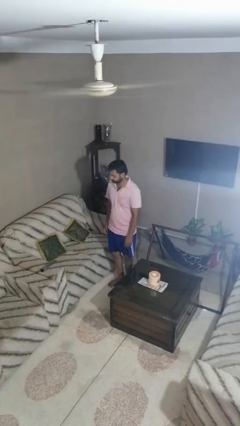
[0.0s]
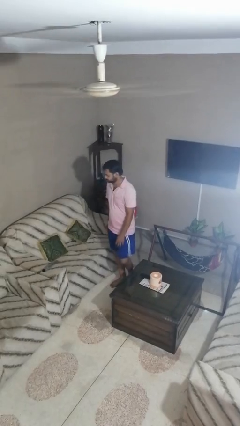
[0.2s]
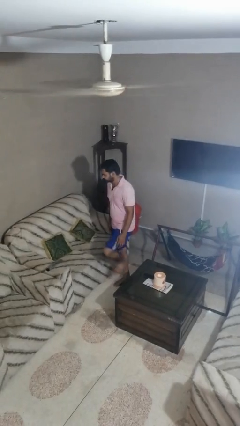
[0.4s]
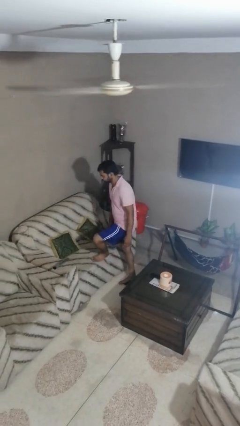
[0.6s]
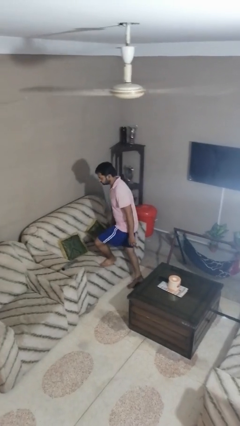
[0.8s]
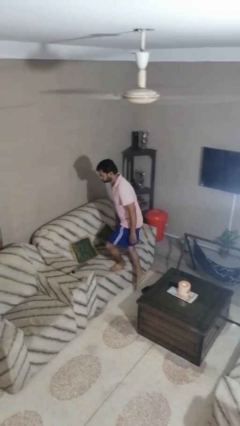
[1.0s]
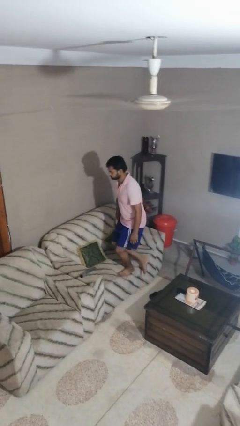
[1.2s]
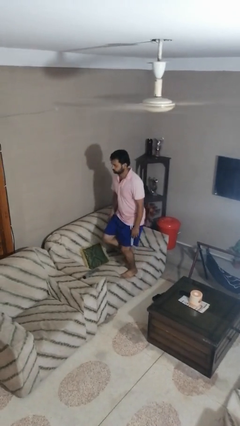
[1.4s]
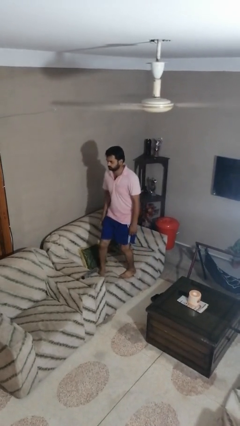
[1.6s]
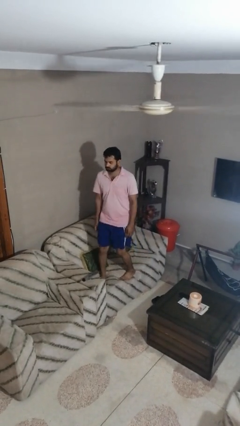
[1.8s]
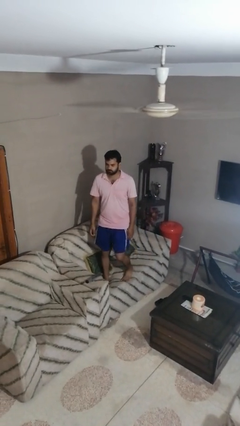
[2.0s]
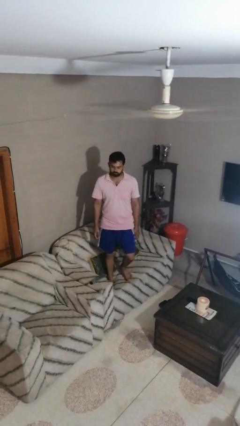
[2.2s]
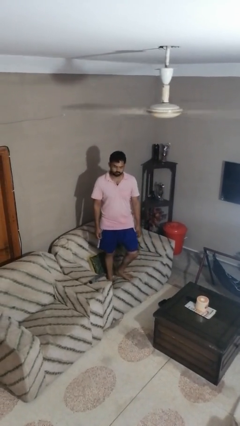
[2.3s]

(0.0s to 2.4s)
person climbs on couch

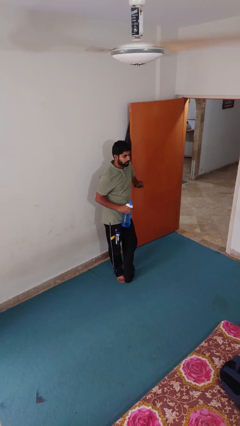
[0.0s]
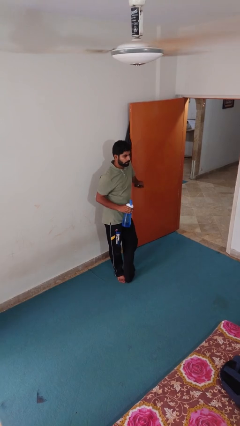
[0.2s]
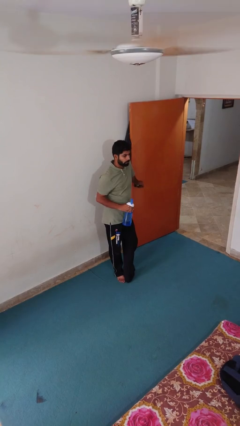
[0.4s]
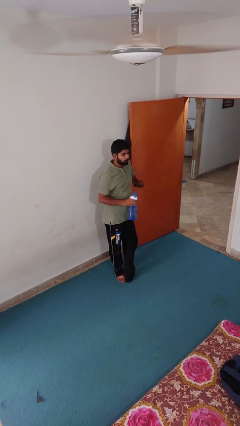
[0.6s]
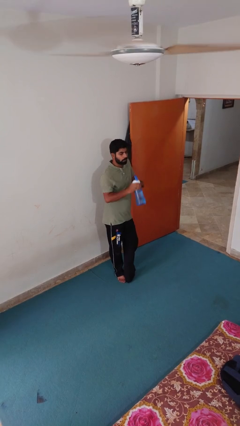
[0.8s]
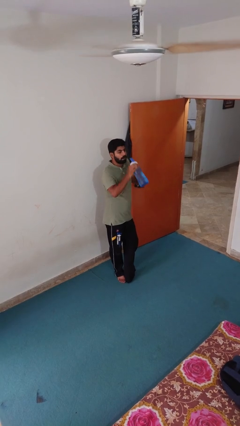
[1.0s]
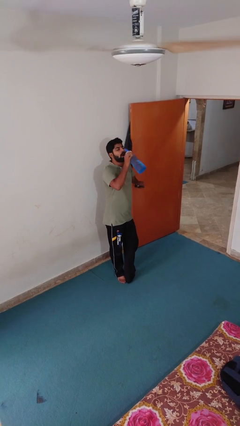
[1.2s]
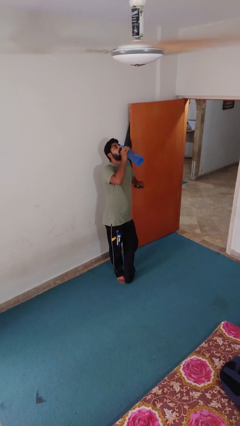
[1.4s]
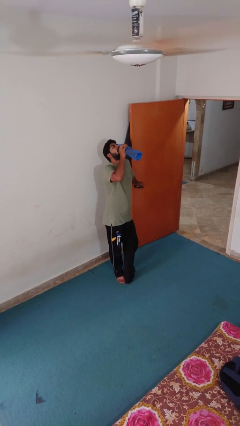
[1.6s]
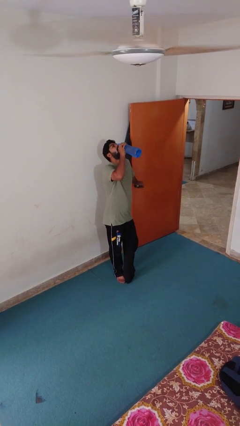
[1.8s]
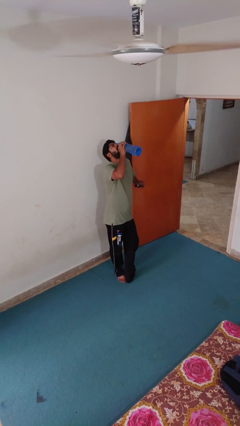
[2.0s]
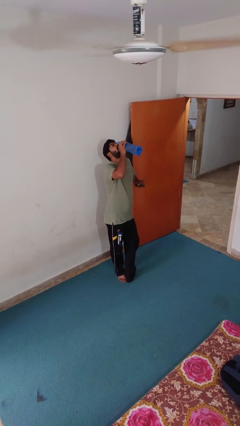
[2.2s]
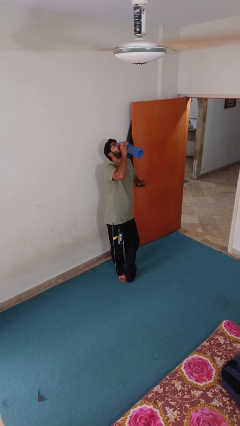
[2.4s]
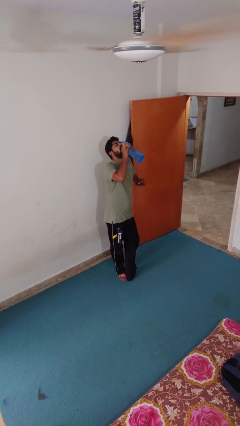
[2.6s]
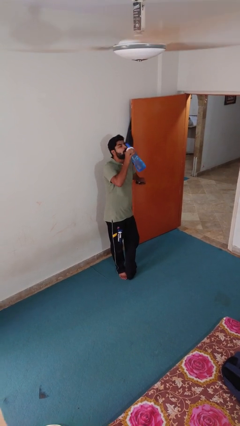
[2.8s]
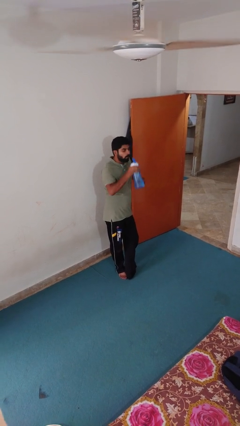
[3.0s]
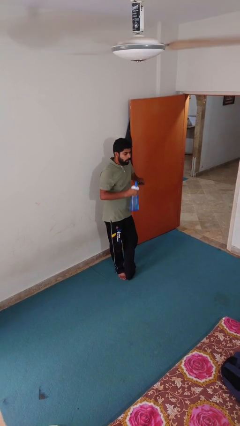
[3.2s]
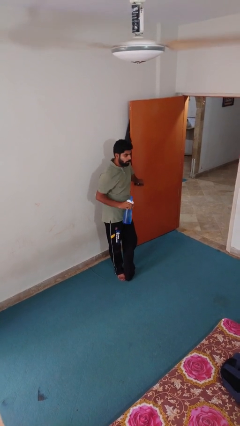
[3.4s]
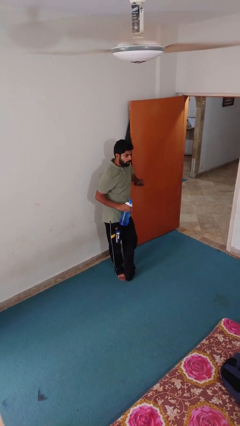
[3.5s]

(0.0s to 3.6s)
person drinks from bottle

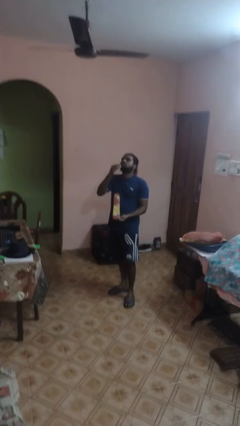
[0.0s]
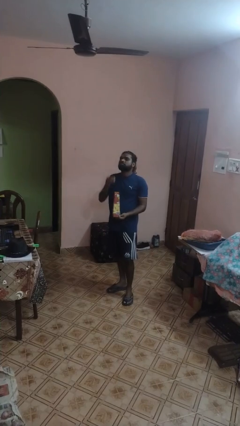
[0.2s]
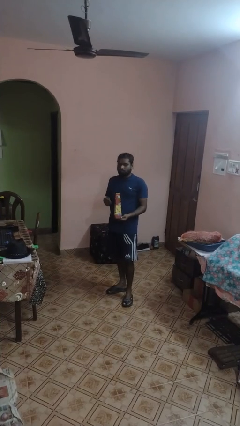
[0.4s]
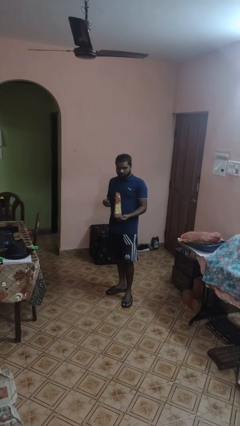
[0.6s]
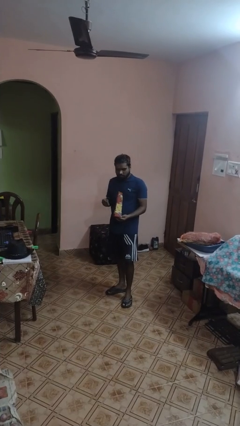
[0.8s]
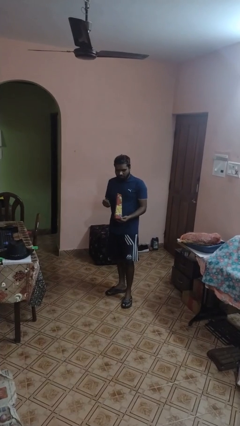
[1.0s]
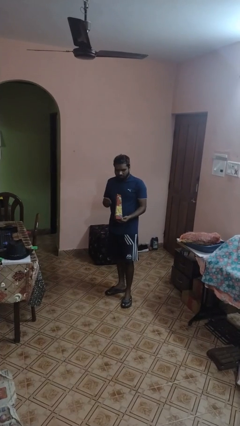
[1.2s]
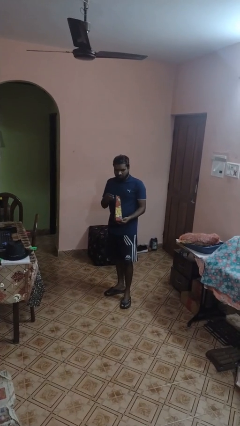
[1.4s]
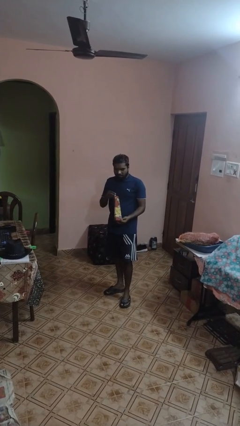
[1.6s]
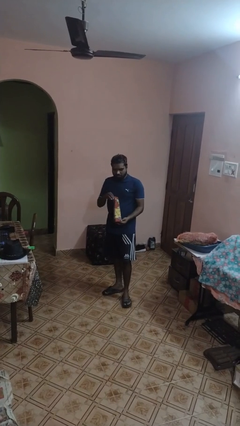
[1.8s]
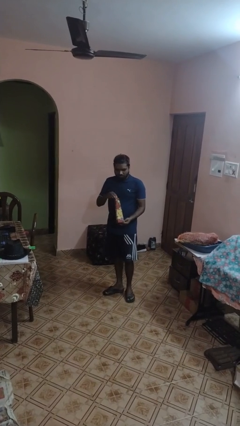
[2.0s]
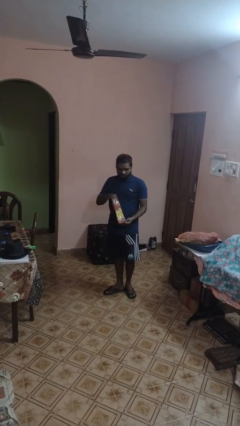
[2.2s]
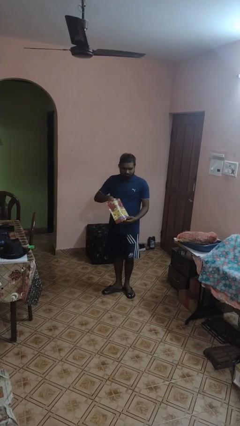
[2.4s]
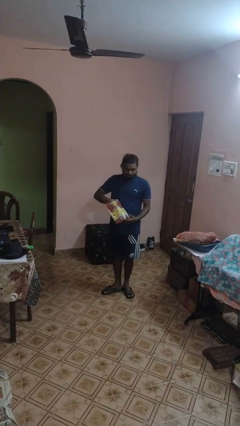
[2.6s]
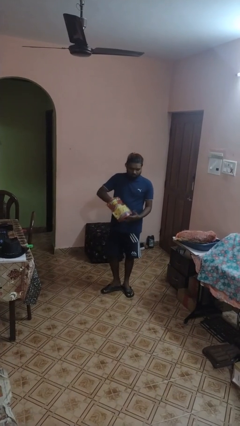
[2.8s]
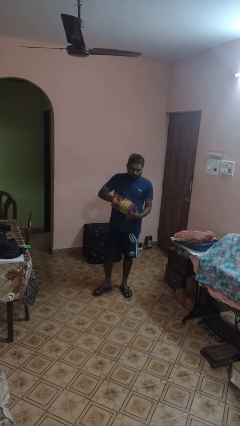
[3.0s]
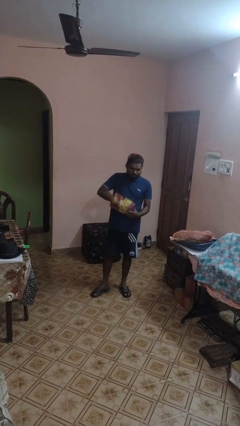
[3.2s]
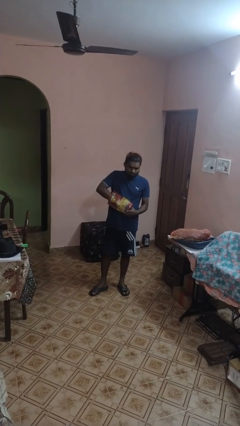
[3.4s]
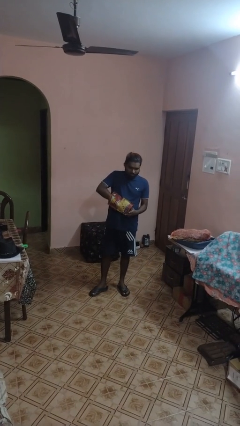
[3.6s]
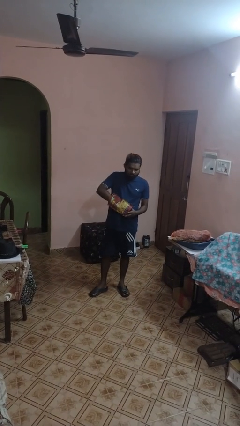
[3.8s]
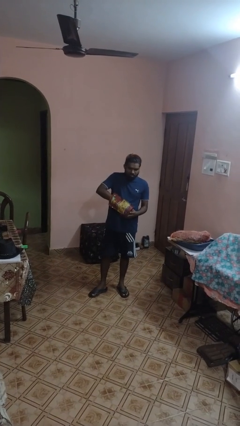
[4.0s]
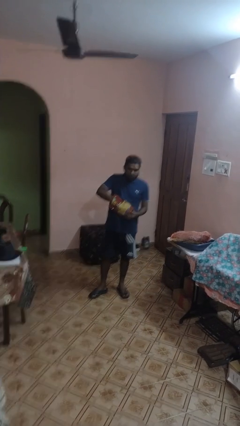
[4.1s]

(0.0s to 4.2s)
person eats snack from bag

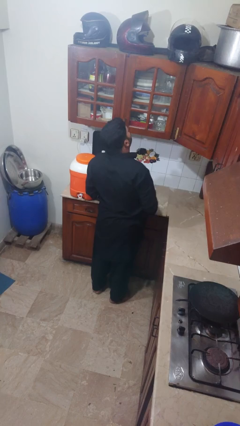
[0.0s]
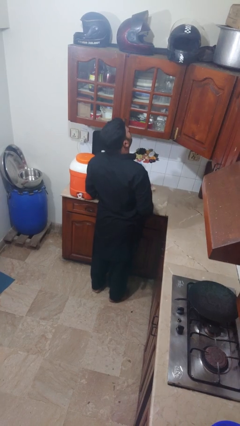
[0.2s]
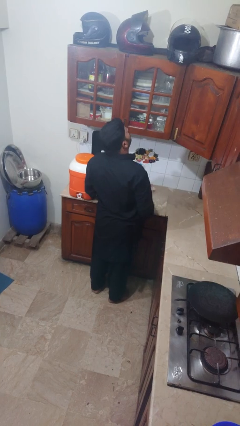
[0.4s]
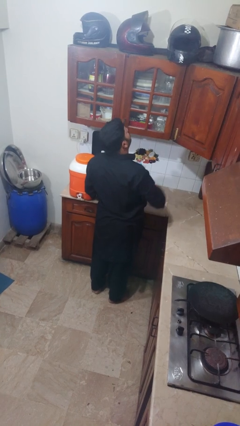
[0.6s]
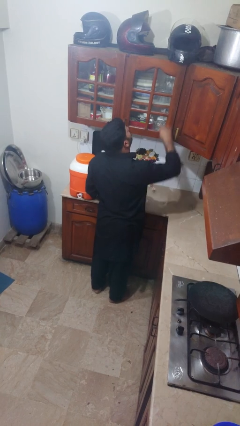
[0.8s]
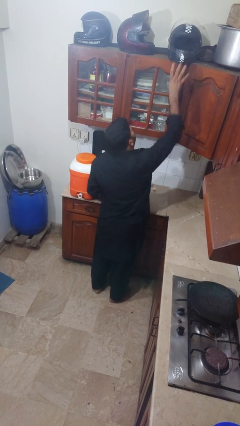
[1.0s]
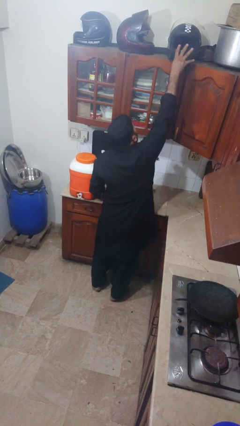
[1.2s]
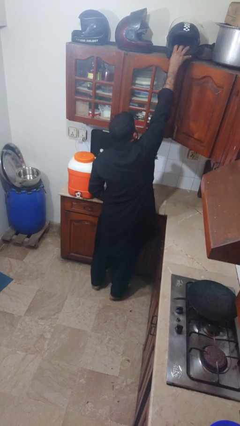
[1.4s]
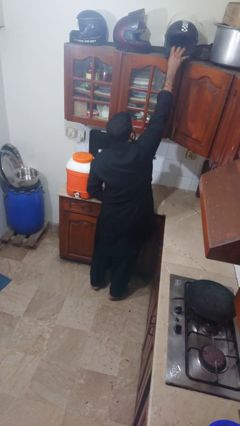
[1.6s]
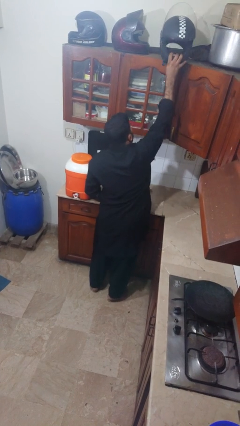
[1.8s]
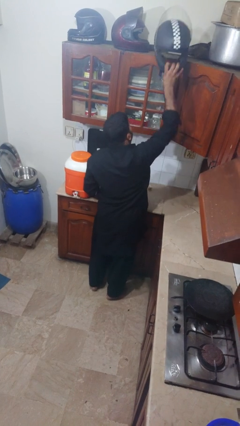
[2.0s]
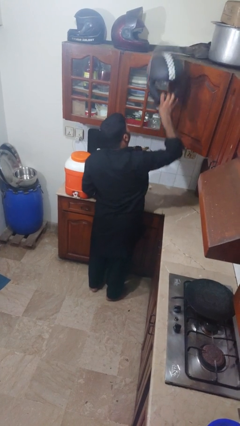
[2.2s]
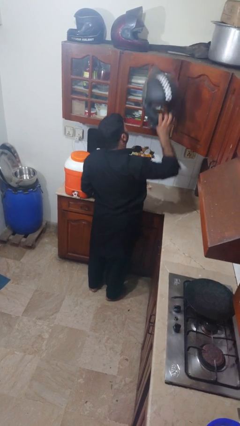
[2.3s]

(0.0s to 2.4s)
person picks up object from shelf

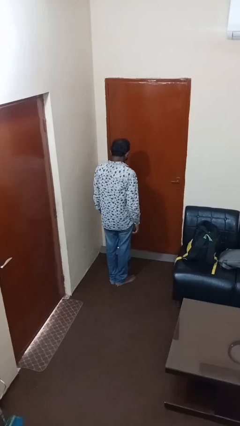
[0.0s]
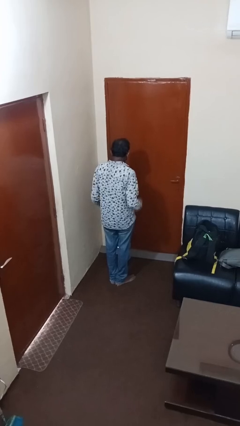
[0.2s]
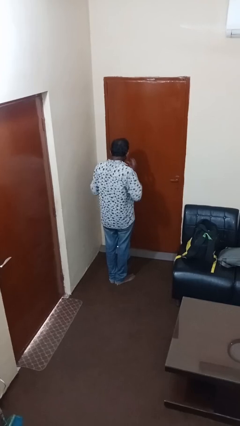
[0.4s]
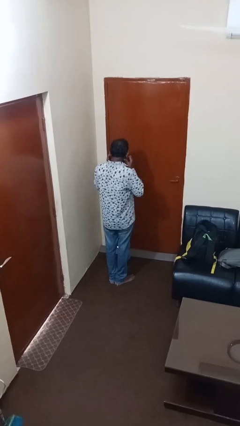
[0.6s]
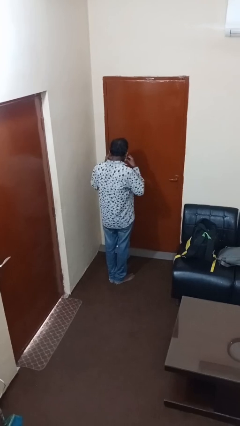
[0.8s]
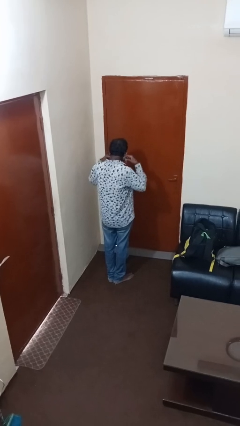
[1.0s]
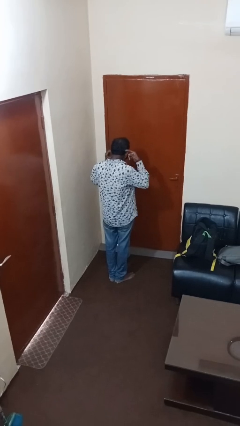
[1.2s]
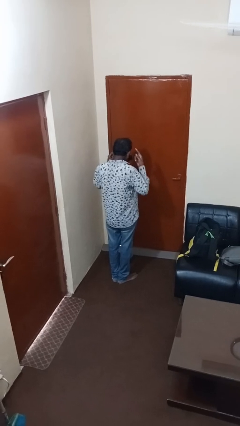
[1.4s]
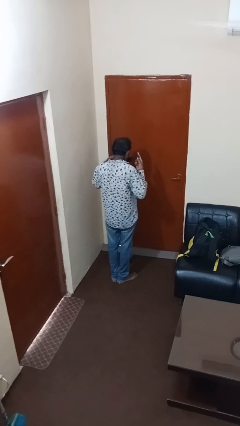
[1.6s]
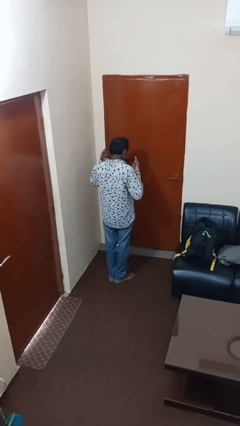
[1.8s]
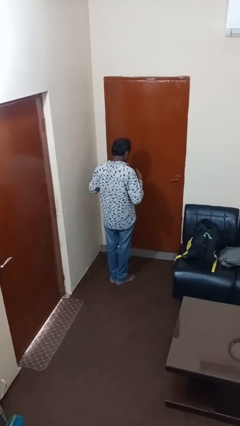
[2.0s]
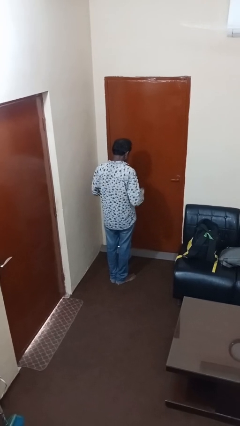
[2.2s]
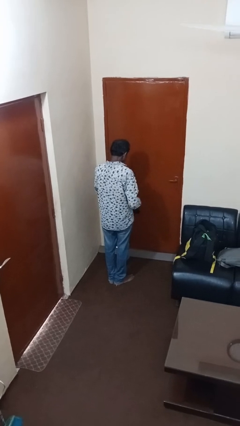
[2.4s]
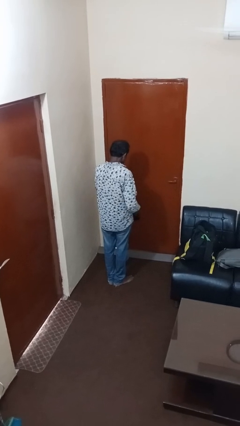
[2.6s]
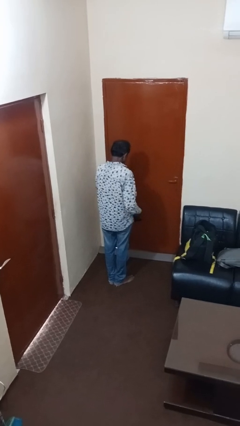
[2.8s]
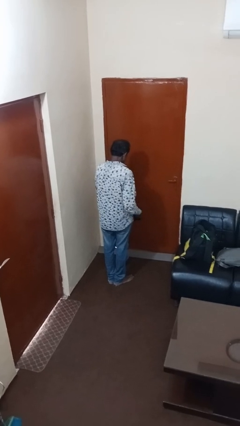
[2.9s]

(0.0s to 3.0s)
person takes off facemask

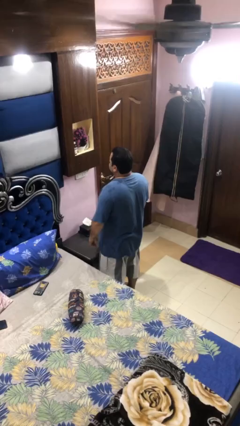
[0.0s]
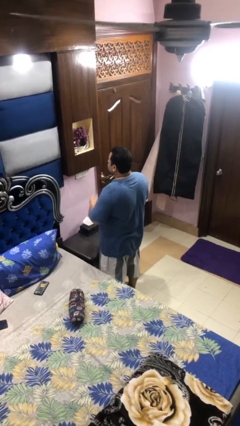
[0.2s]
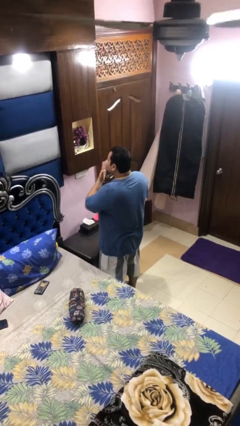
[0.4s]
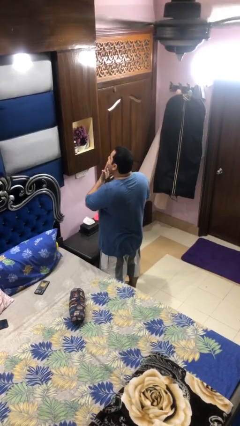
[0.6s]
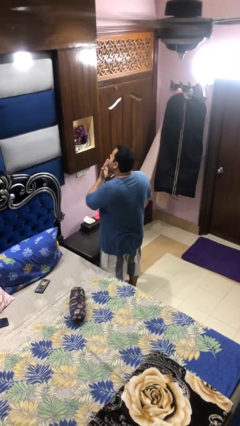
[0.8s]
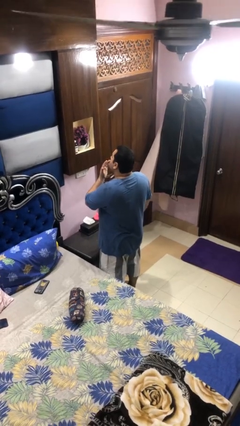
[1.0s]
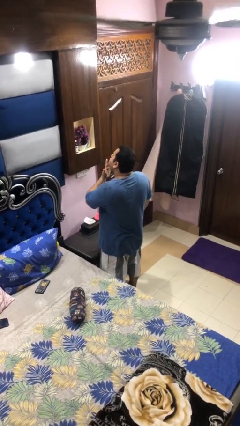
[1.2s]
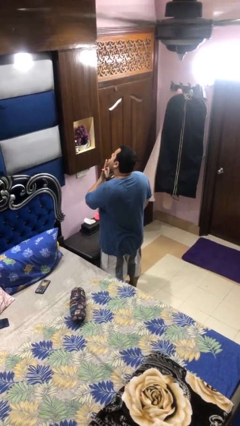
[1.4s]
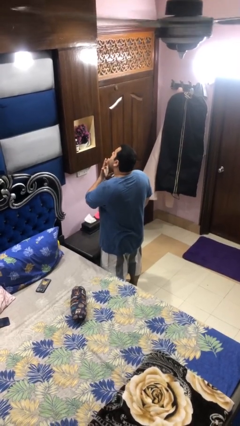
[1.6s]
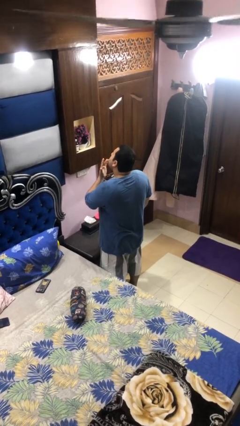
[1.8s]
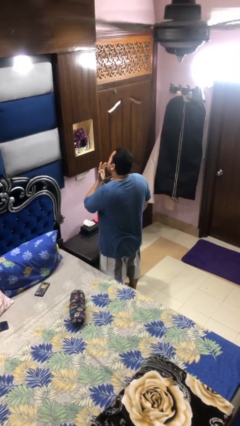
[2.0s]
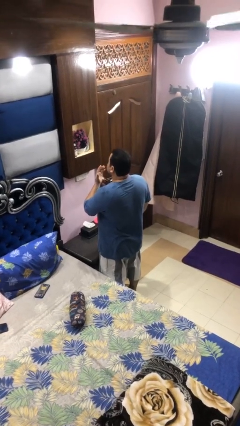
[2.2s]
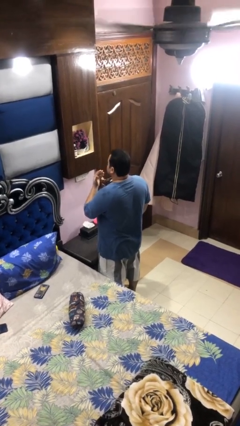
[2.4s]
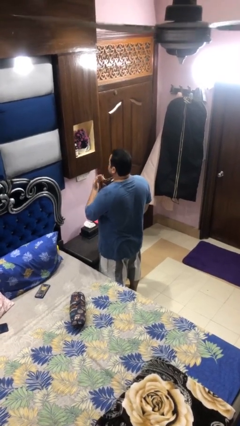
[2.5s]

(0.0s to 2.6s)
person licks fingers
